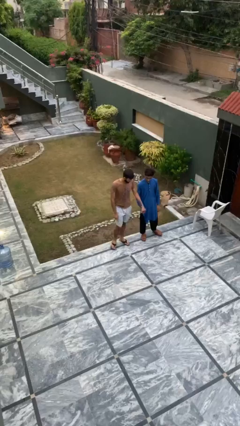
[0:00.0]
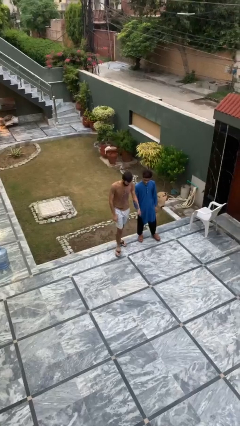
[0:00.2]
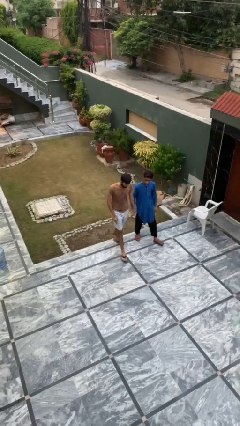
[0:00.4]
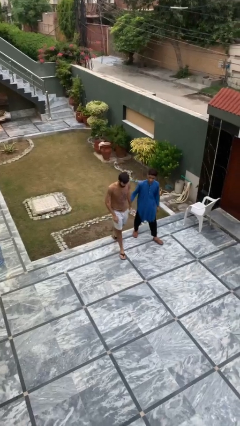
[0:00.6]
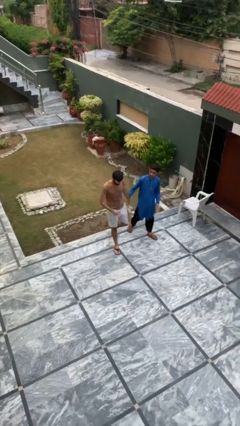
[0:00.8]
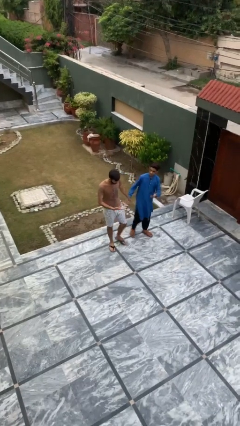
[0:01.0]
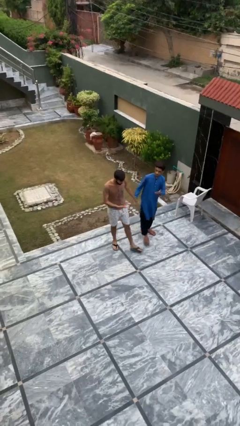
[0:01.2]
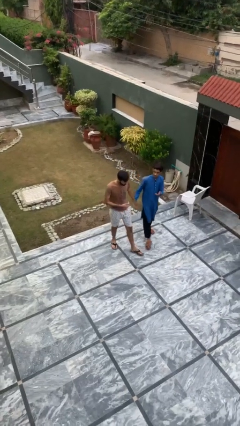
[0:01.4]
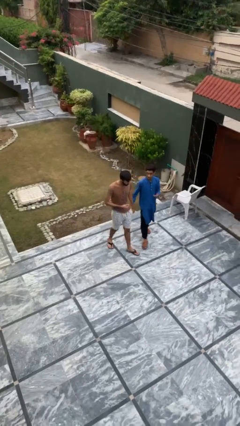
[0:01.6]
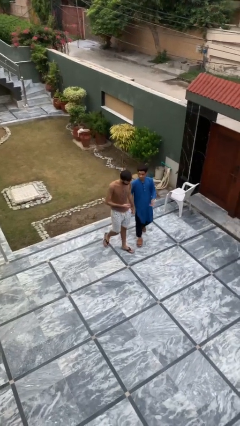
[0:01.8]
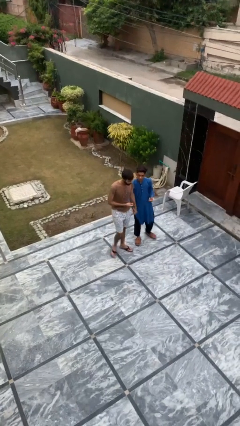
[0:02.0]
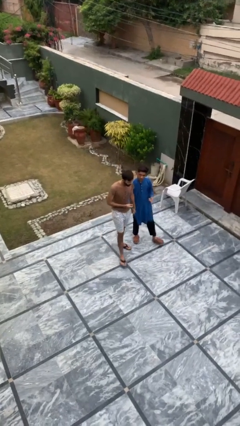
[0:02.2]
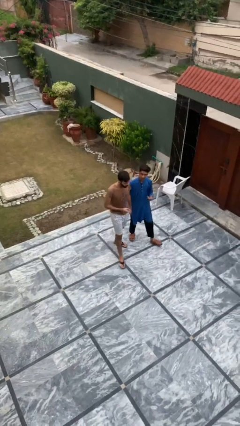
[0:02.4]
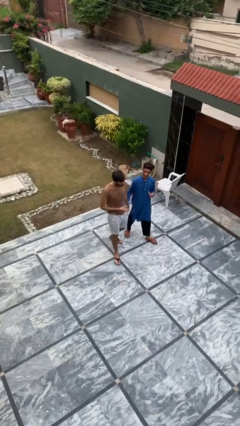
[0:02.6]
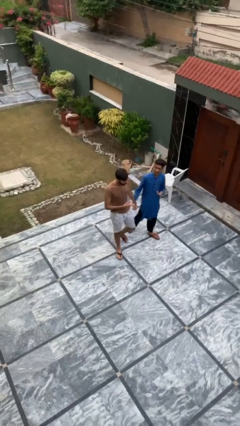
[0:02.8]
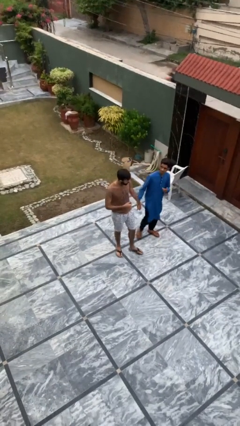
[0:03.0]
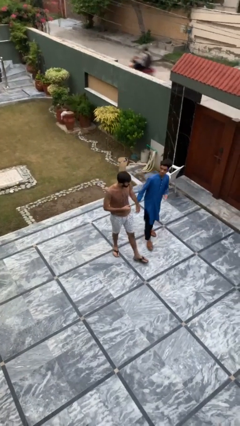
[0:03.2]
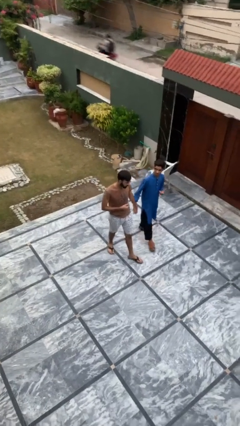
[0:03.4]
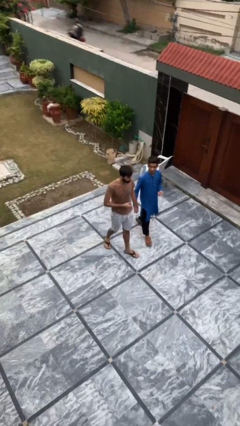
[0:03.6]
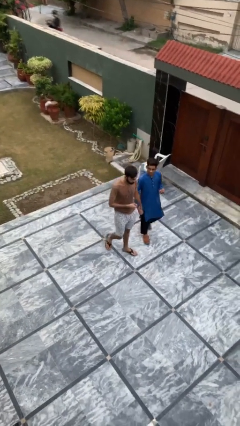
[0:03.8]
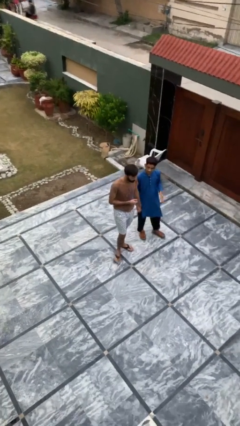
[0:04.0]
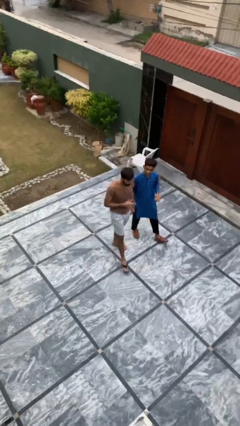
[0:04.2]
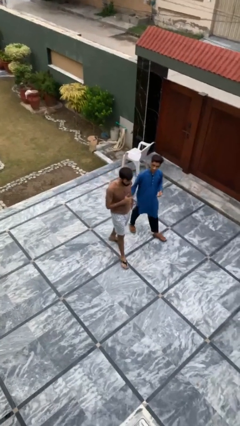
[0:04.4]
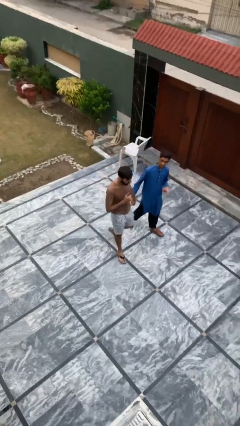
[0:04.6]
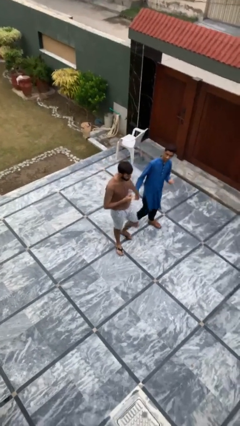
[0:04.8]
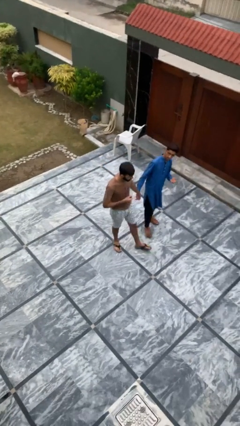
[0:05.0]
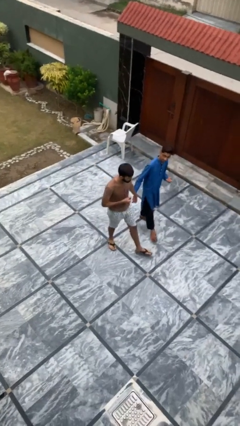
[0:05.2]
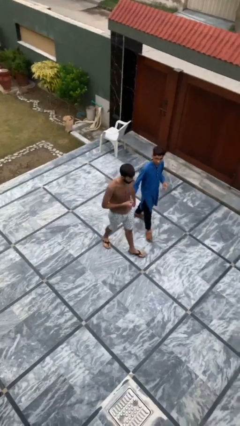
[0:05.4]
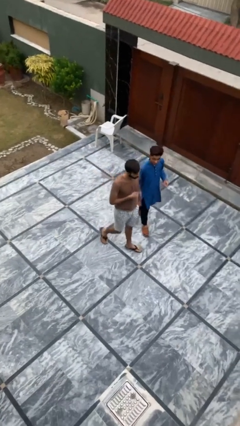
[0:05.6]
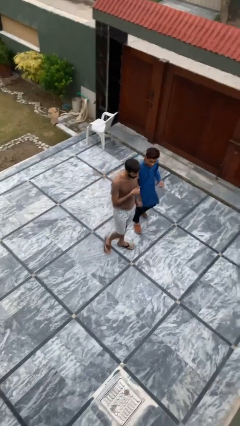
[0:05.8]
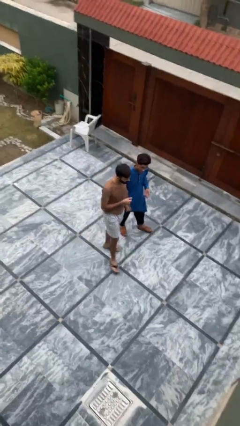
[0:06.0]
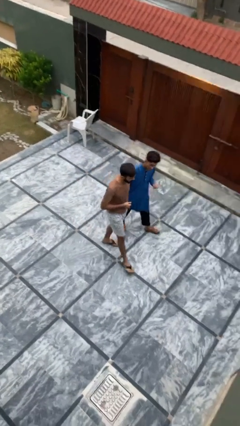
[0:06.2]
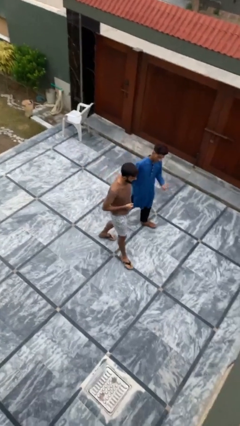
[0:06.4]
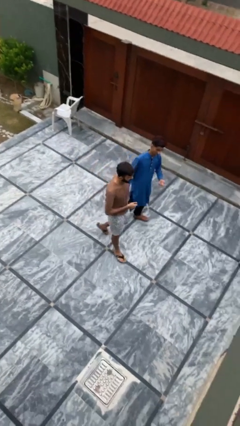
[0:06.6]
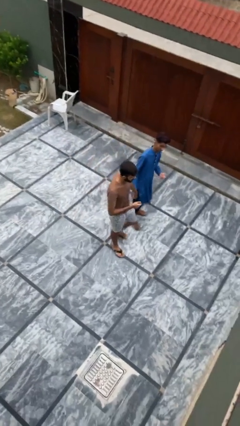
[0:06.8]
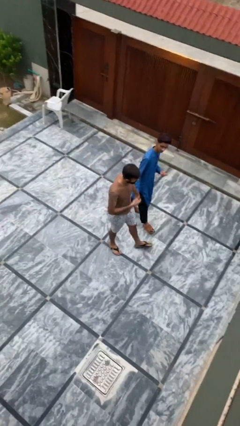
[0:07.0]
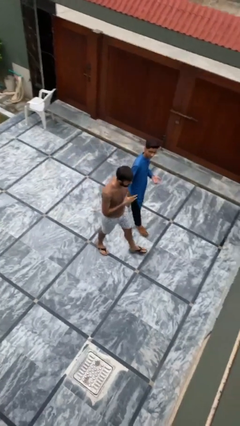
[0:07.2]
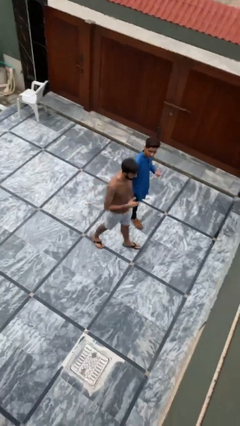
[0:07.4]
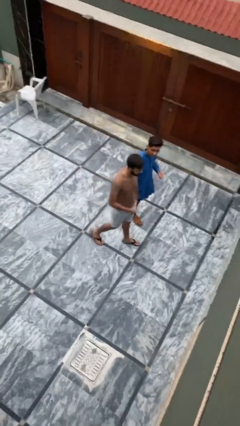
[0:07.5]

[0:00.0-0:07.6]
person holds hand

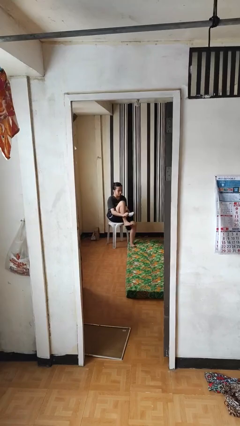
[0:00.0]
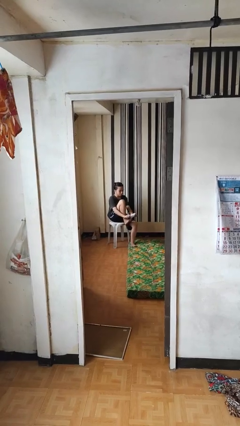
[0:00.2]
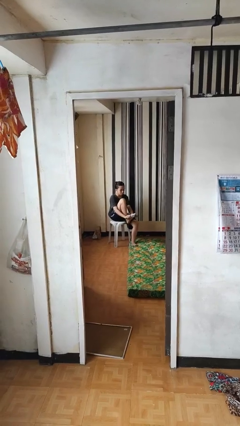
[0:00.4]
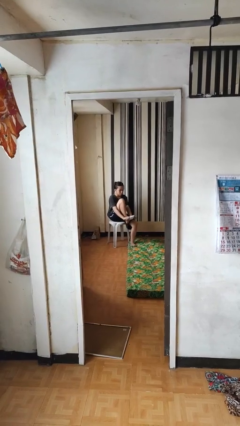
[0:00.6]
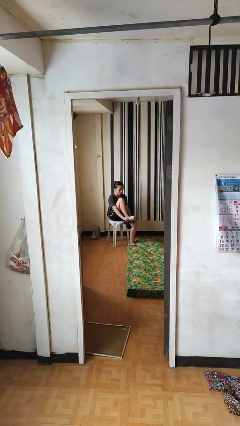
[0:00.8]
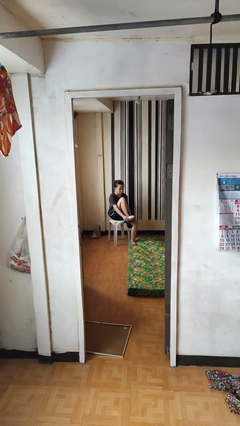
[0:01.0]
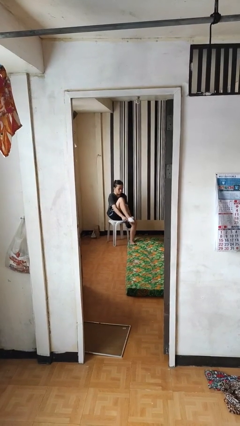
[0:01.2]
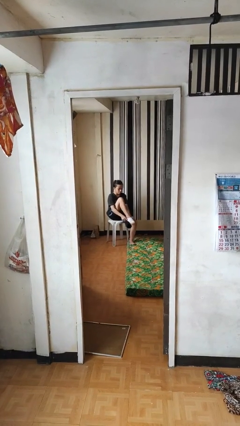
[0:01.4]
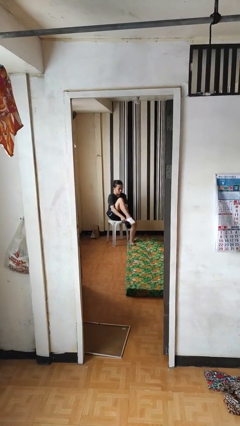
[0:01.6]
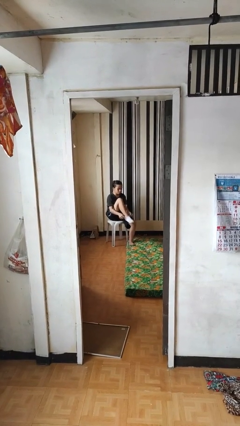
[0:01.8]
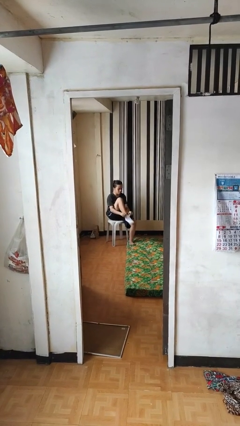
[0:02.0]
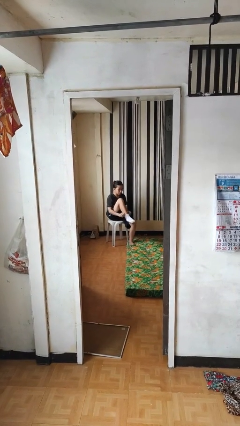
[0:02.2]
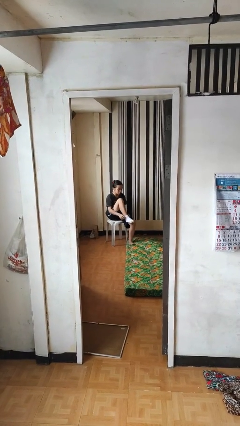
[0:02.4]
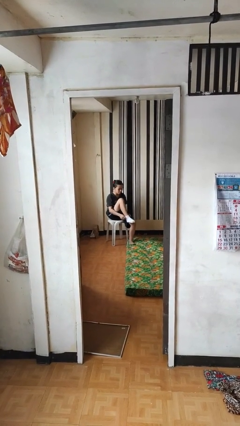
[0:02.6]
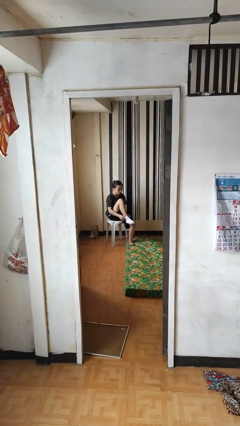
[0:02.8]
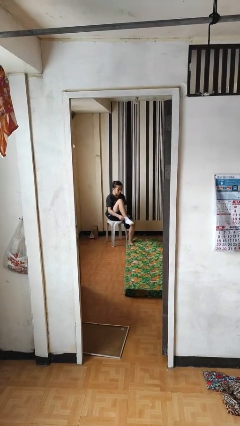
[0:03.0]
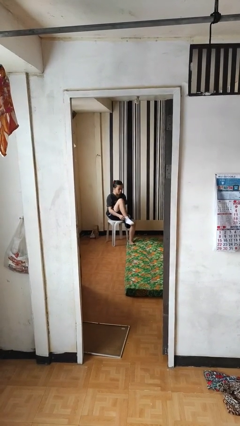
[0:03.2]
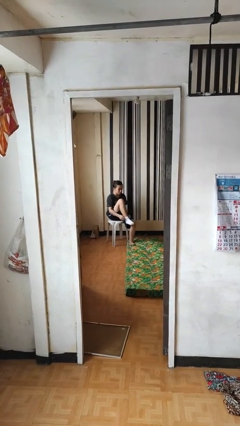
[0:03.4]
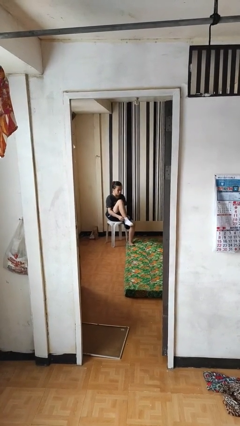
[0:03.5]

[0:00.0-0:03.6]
person puts on socks

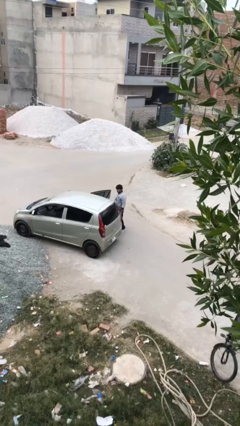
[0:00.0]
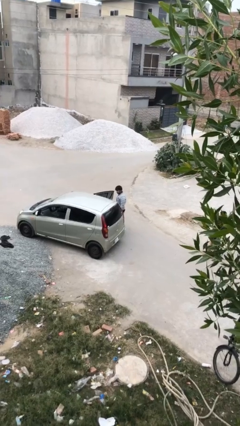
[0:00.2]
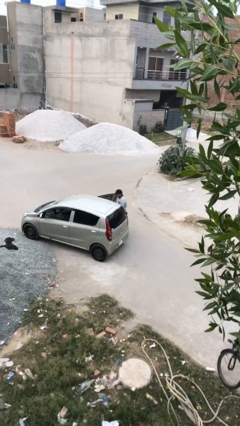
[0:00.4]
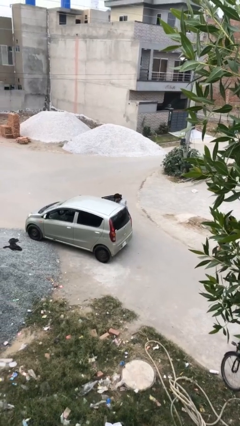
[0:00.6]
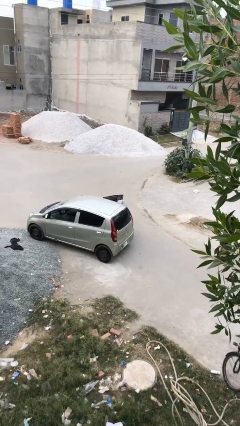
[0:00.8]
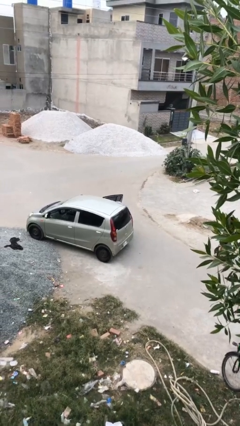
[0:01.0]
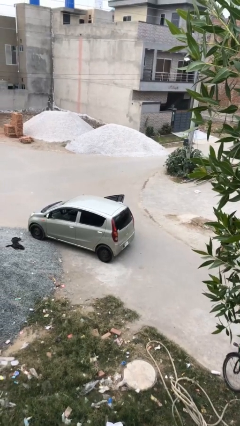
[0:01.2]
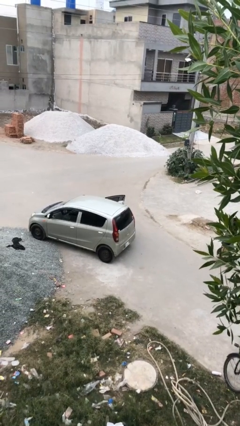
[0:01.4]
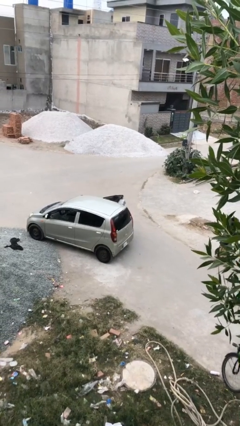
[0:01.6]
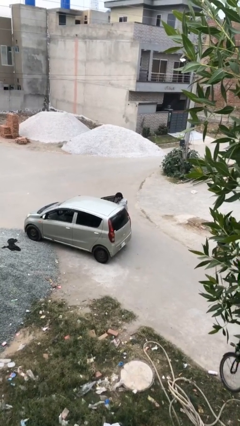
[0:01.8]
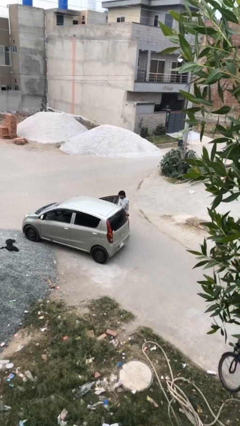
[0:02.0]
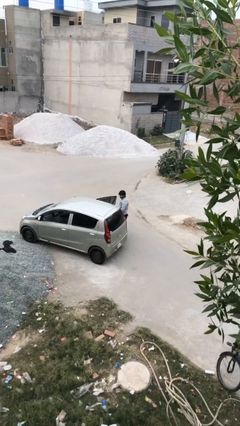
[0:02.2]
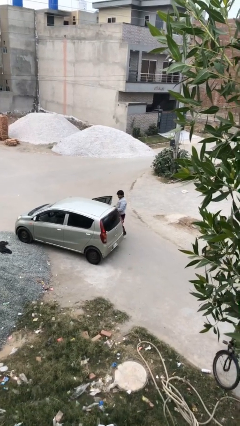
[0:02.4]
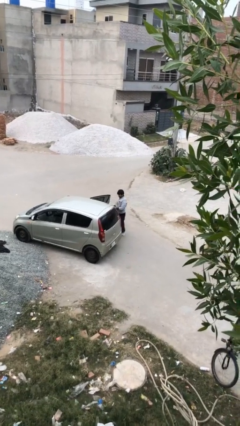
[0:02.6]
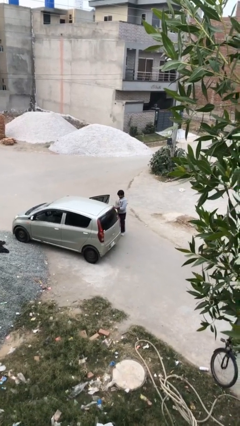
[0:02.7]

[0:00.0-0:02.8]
person unloads car

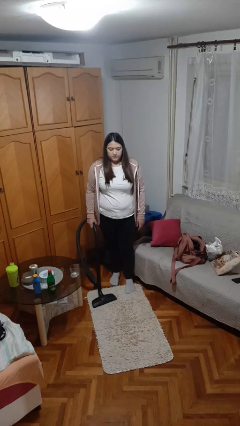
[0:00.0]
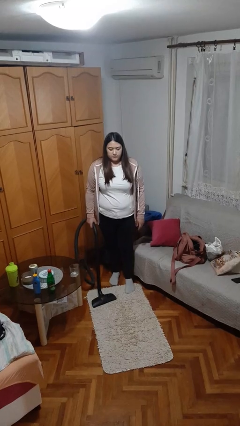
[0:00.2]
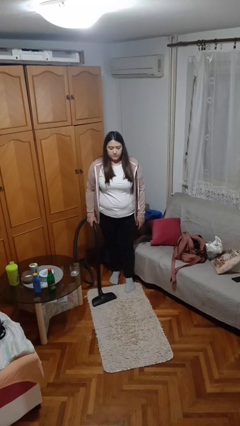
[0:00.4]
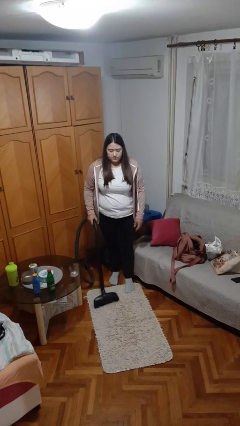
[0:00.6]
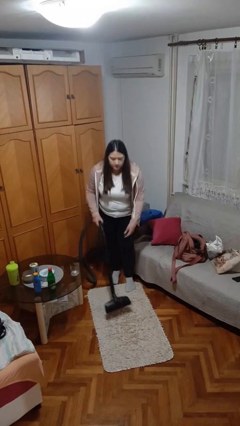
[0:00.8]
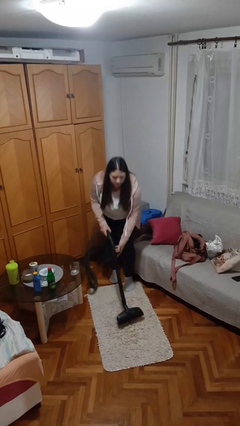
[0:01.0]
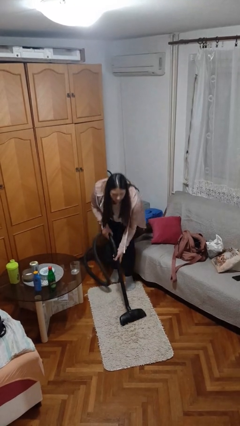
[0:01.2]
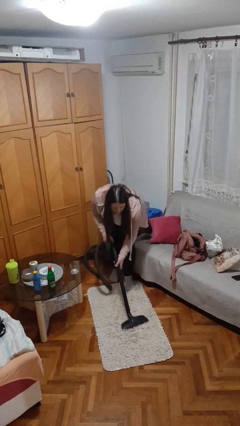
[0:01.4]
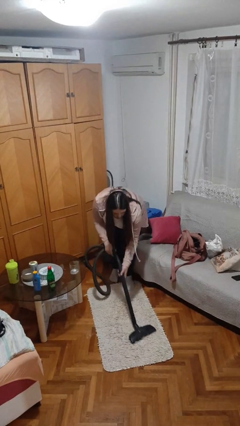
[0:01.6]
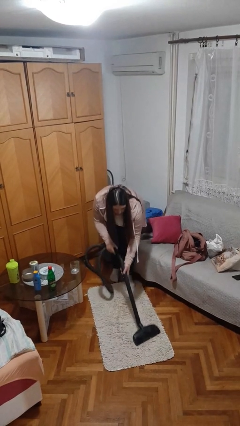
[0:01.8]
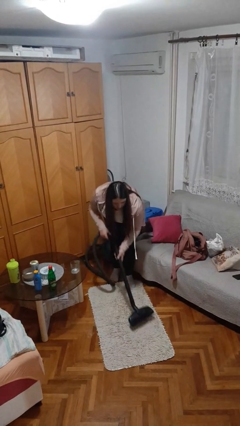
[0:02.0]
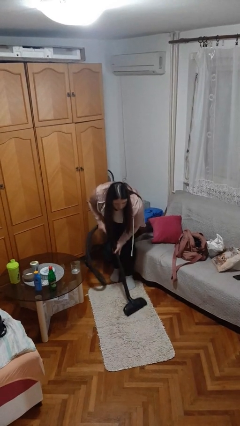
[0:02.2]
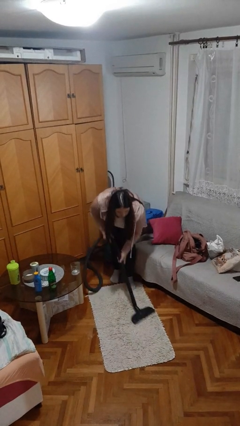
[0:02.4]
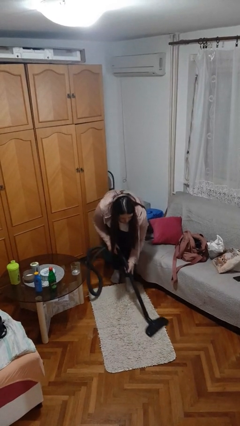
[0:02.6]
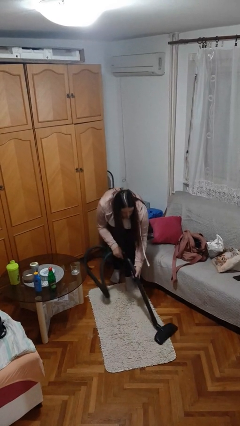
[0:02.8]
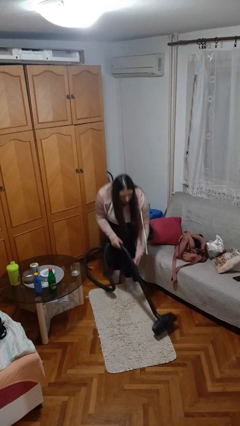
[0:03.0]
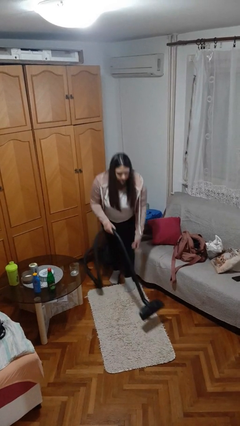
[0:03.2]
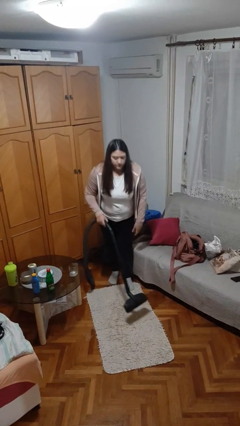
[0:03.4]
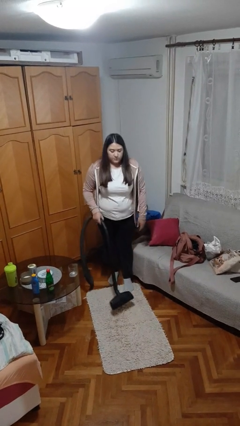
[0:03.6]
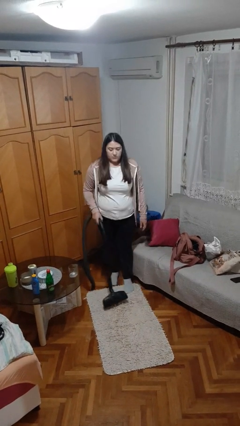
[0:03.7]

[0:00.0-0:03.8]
person vacuums carpet

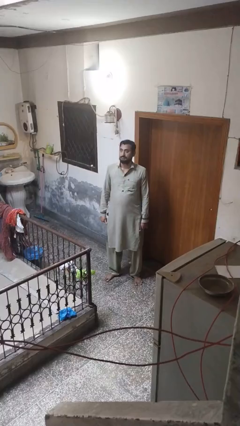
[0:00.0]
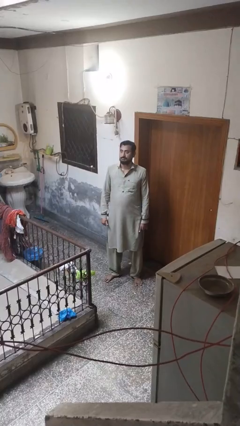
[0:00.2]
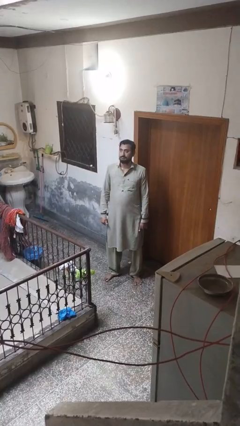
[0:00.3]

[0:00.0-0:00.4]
person gestures call me
